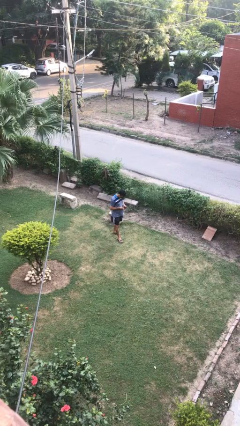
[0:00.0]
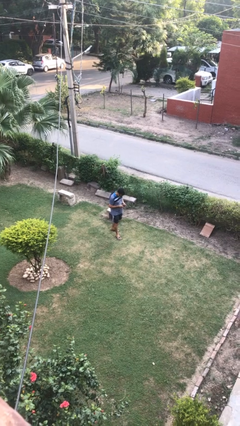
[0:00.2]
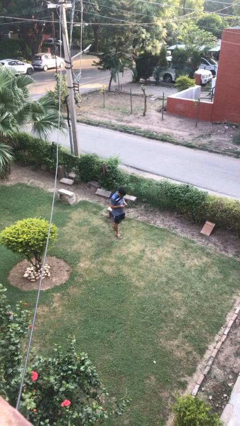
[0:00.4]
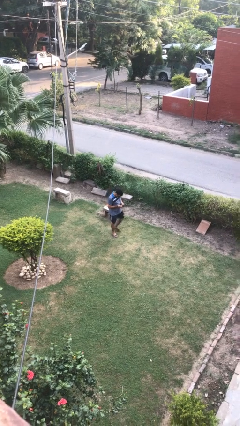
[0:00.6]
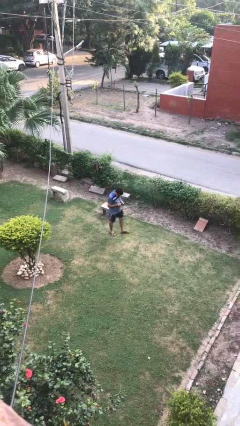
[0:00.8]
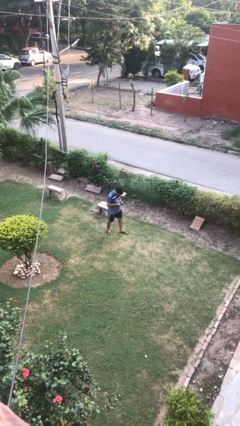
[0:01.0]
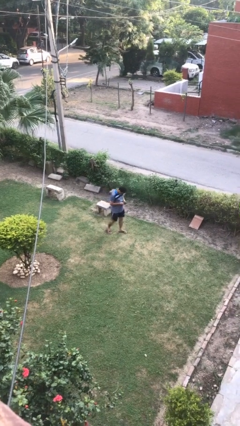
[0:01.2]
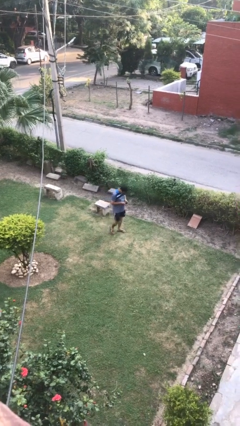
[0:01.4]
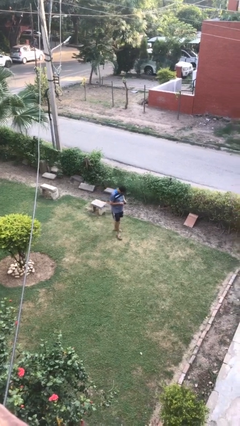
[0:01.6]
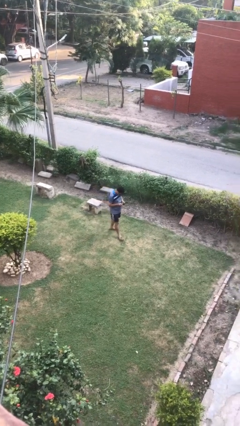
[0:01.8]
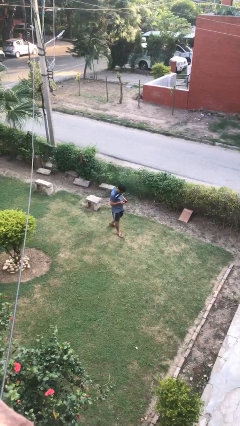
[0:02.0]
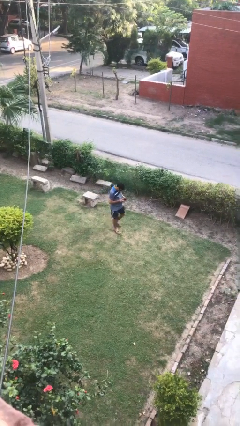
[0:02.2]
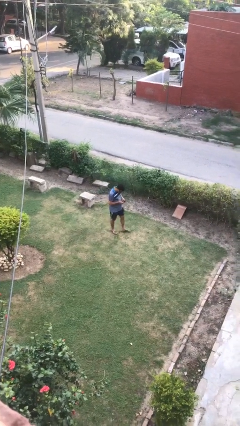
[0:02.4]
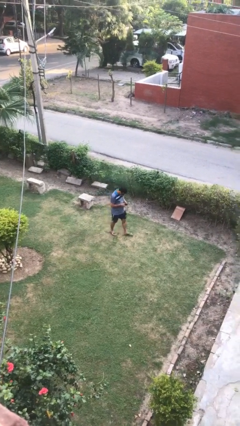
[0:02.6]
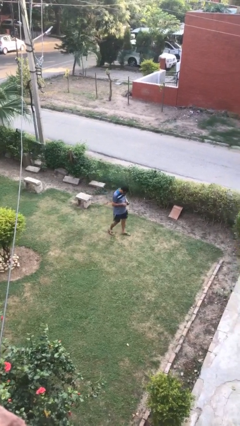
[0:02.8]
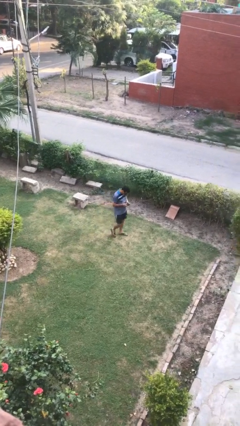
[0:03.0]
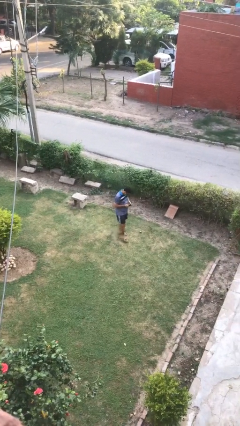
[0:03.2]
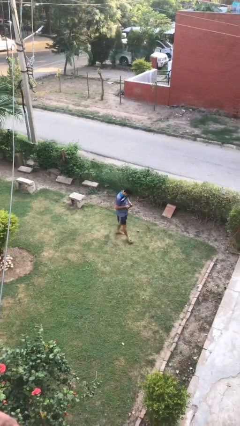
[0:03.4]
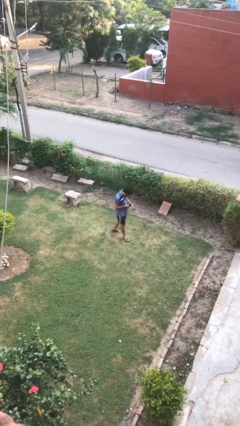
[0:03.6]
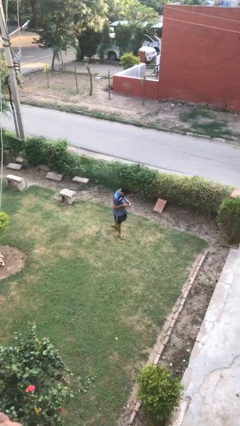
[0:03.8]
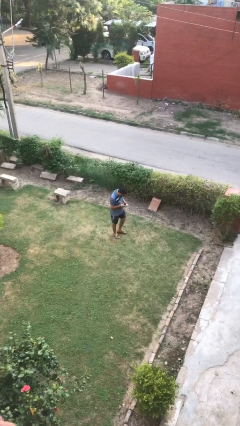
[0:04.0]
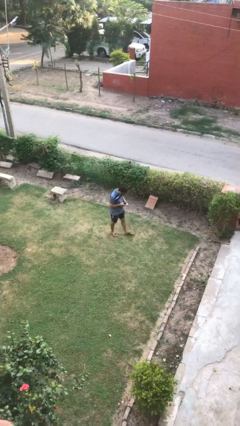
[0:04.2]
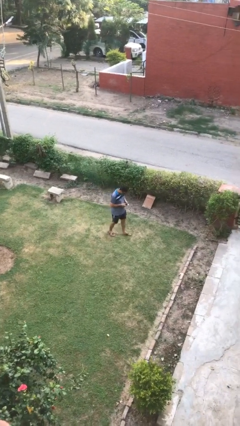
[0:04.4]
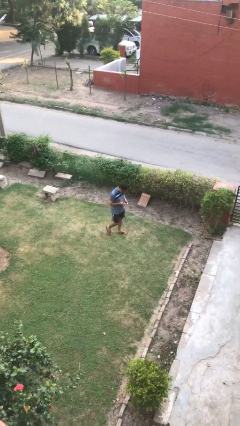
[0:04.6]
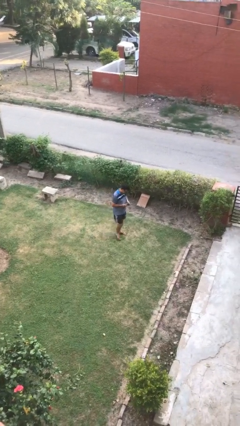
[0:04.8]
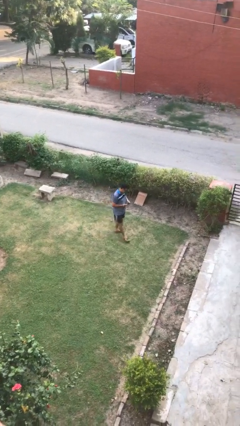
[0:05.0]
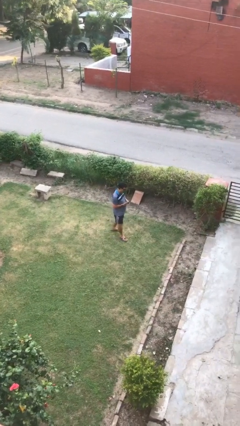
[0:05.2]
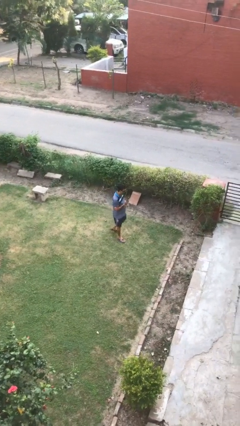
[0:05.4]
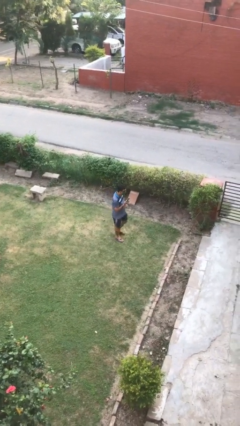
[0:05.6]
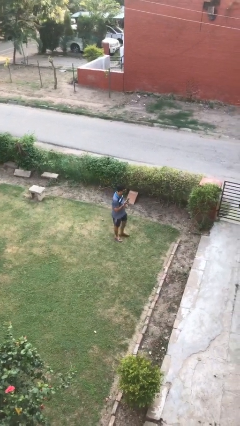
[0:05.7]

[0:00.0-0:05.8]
person texts on phone

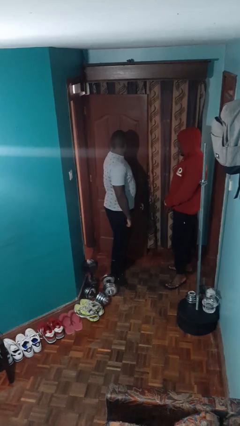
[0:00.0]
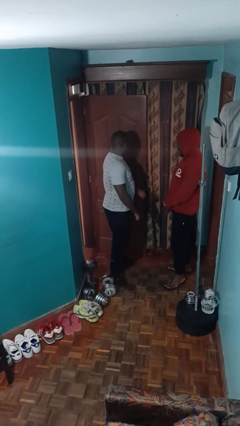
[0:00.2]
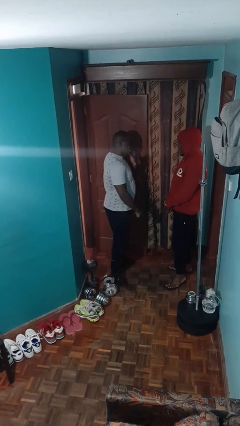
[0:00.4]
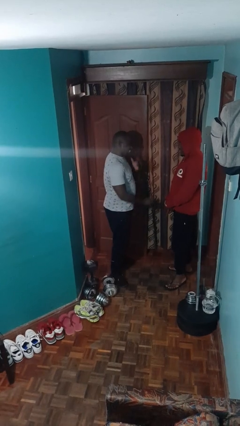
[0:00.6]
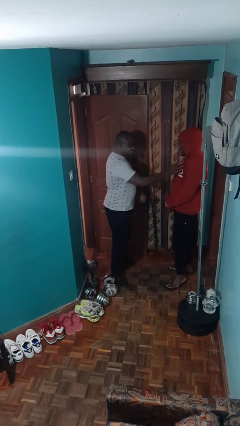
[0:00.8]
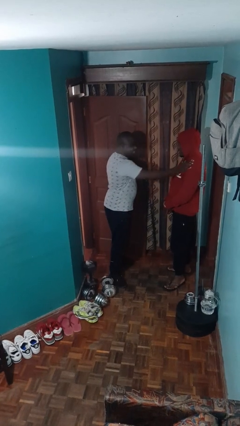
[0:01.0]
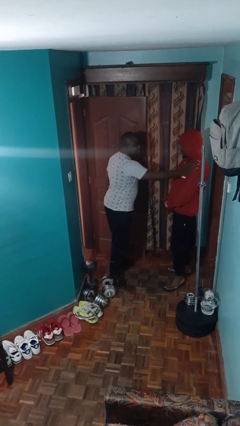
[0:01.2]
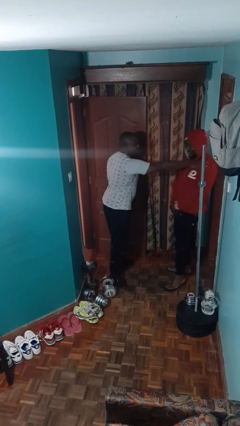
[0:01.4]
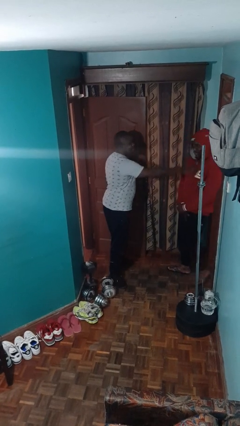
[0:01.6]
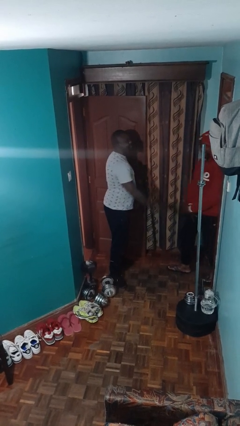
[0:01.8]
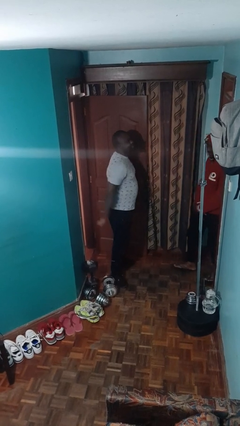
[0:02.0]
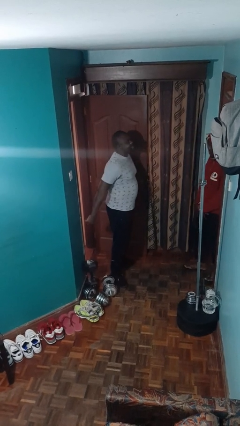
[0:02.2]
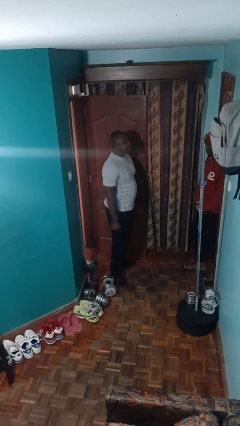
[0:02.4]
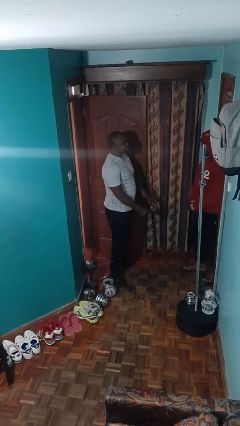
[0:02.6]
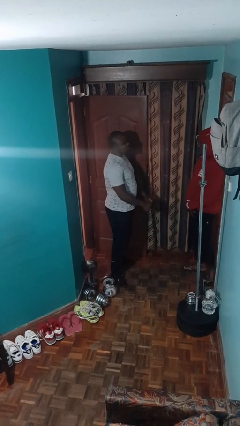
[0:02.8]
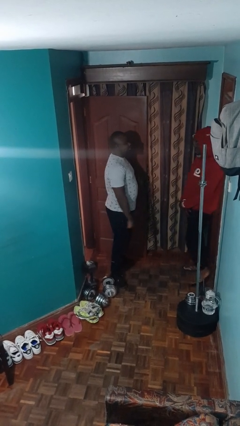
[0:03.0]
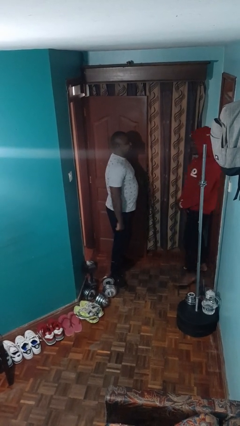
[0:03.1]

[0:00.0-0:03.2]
person shoves person

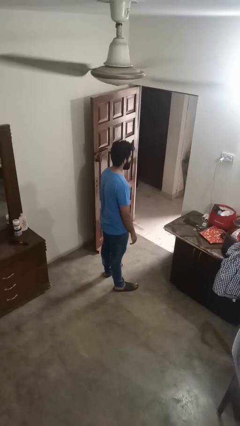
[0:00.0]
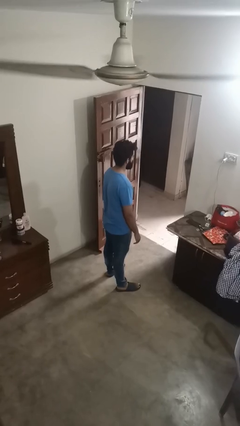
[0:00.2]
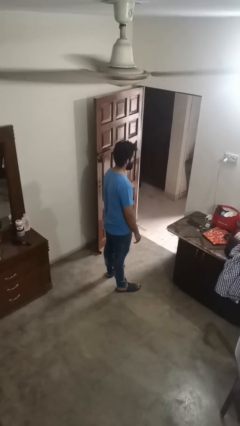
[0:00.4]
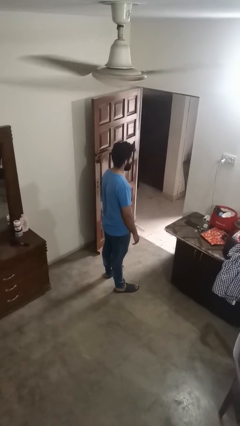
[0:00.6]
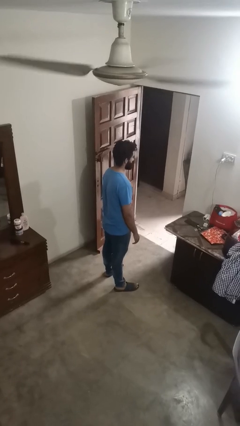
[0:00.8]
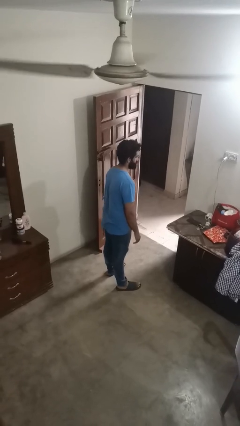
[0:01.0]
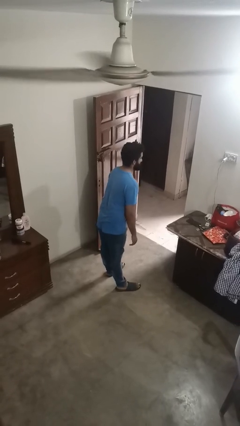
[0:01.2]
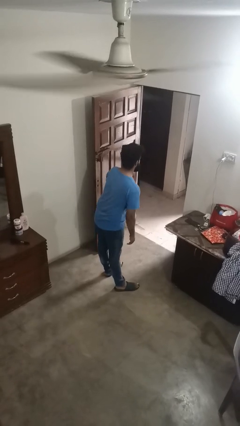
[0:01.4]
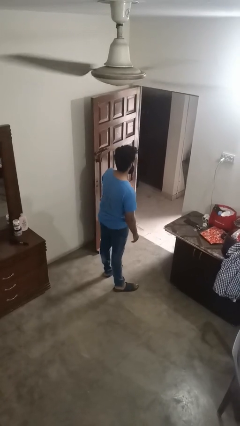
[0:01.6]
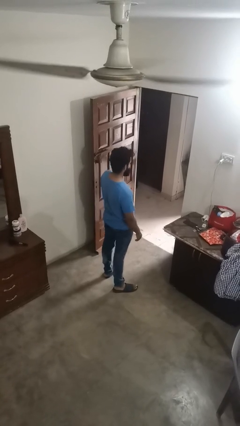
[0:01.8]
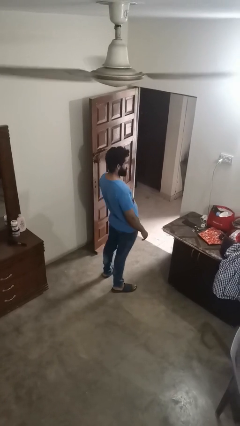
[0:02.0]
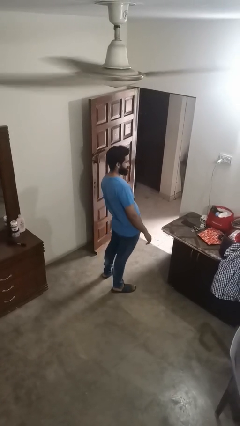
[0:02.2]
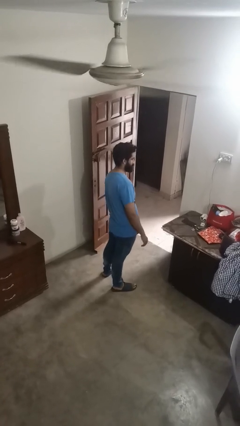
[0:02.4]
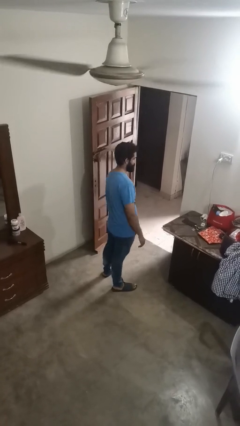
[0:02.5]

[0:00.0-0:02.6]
person wiggles hips

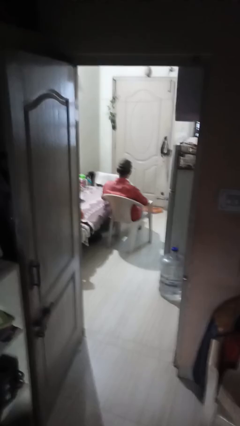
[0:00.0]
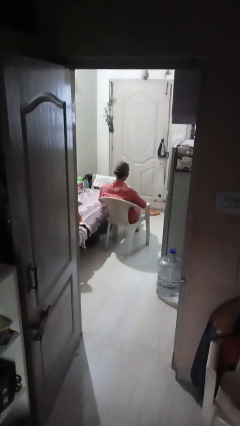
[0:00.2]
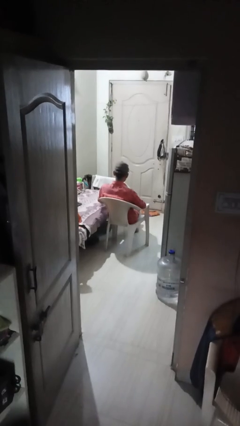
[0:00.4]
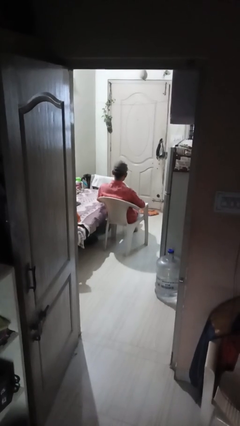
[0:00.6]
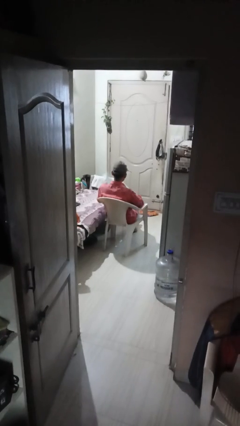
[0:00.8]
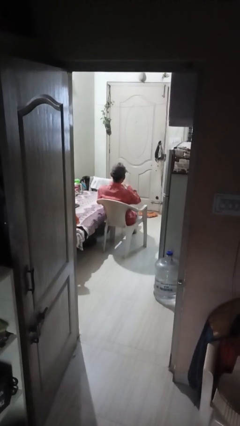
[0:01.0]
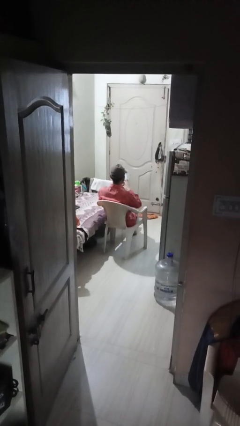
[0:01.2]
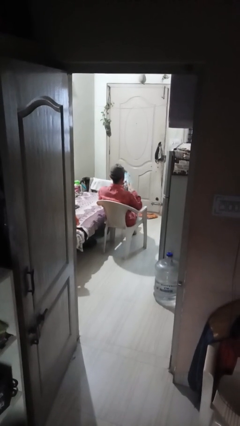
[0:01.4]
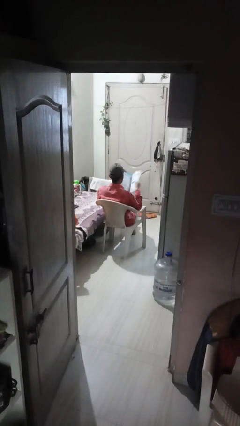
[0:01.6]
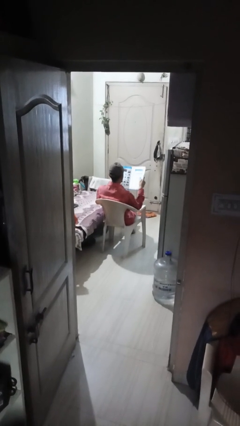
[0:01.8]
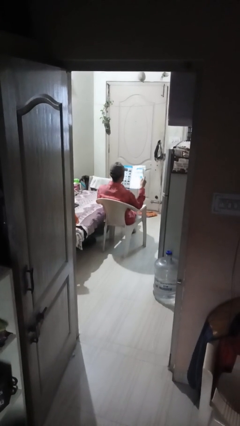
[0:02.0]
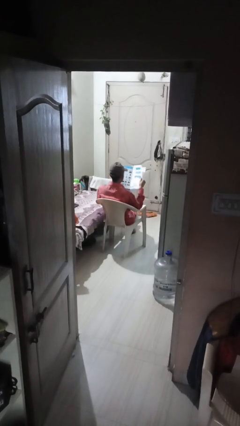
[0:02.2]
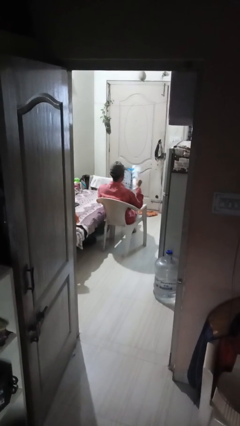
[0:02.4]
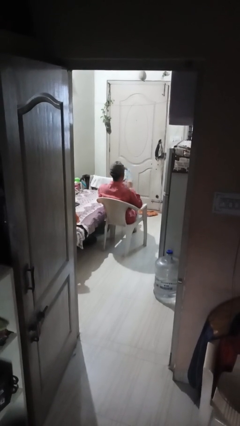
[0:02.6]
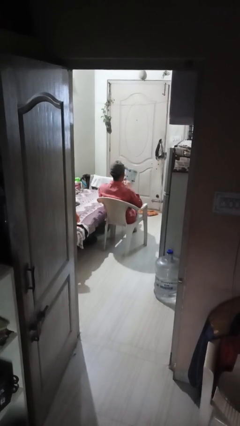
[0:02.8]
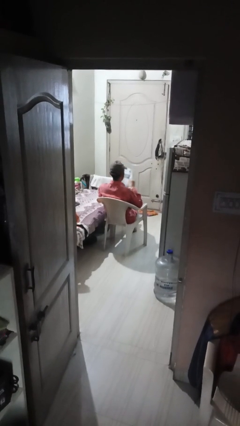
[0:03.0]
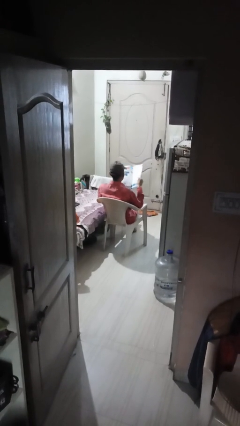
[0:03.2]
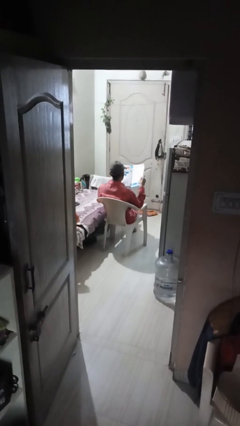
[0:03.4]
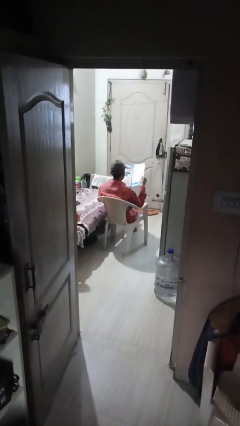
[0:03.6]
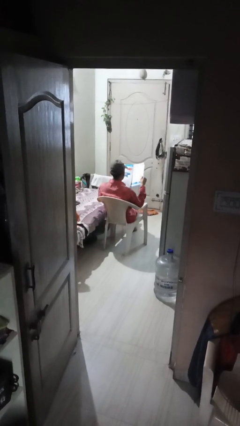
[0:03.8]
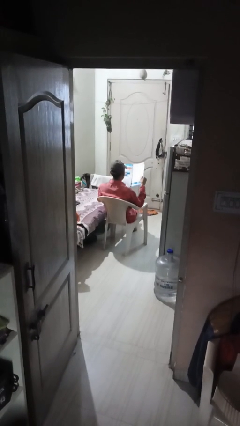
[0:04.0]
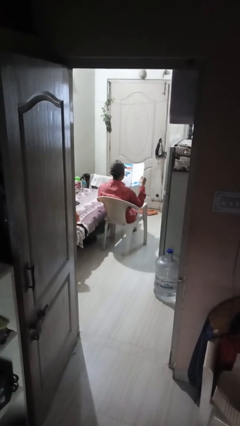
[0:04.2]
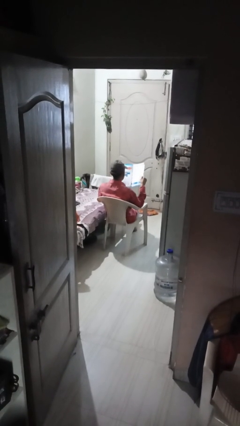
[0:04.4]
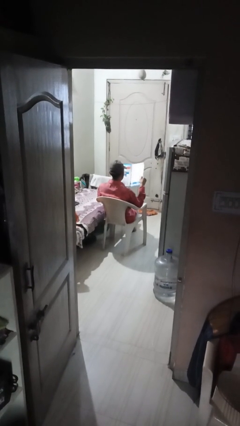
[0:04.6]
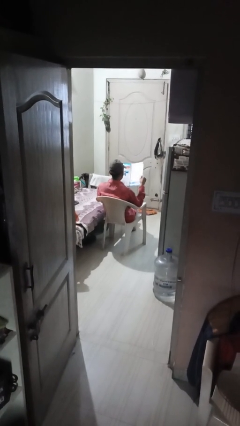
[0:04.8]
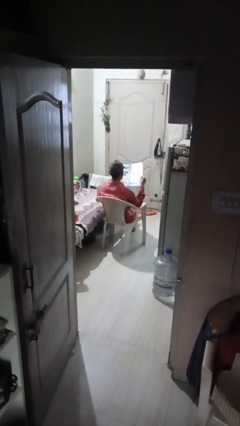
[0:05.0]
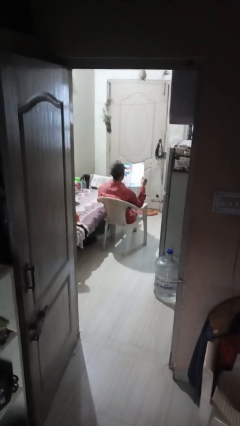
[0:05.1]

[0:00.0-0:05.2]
person reads magazine

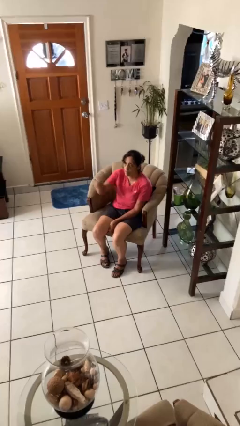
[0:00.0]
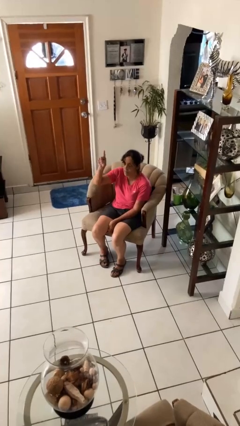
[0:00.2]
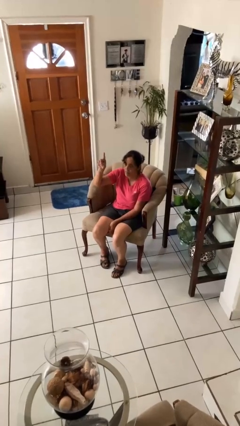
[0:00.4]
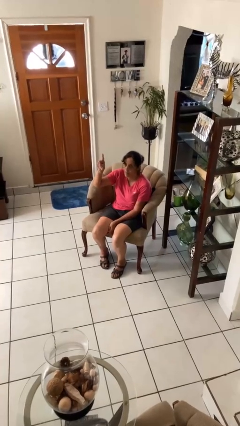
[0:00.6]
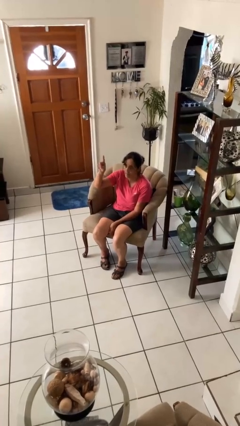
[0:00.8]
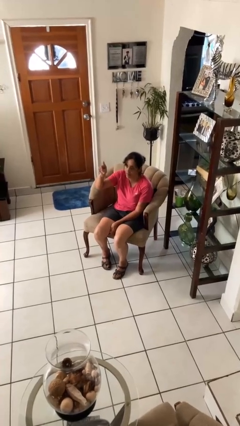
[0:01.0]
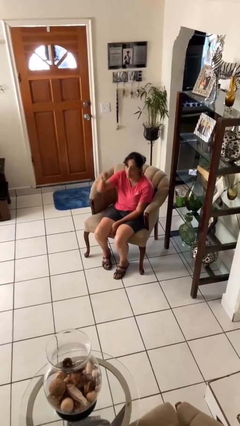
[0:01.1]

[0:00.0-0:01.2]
person gestures number one
